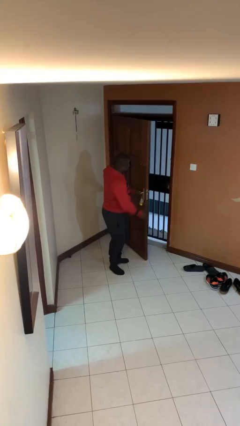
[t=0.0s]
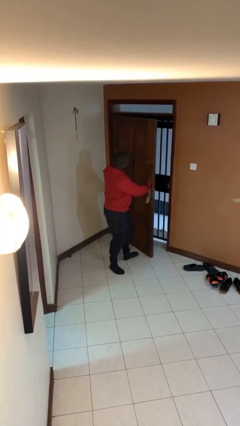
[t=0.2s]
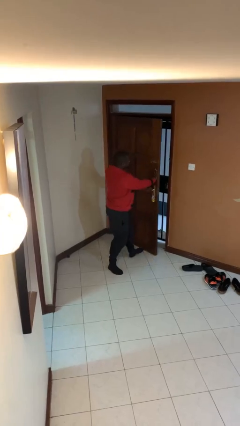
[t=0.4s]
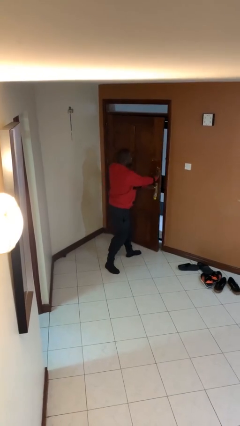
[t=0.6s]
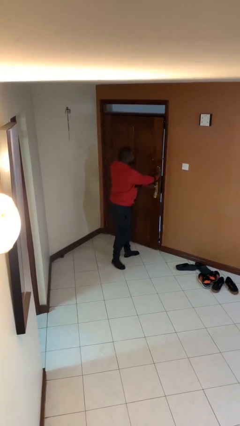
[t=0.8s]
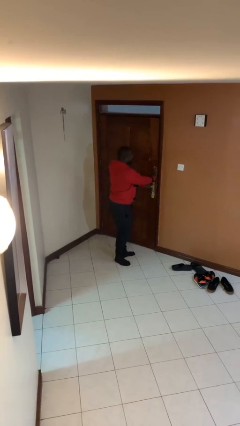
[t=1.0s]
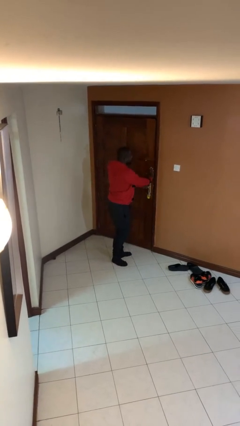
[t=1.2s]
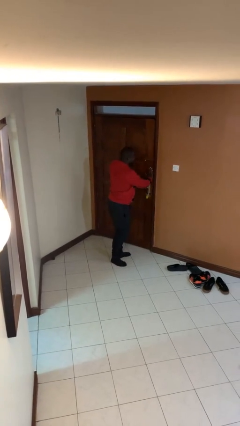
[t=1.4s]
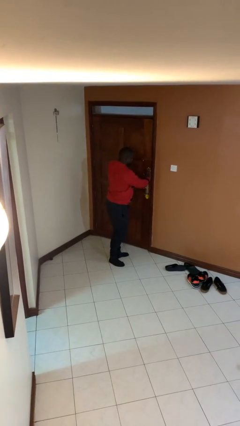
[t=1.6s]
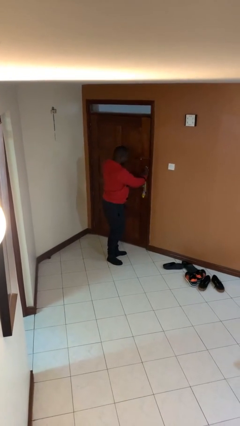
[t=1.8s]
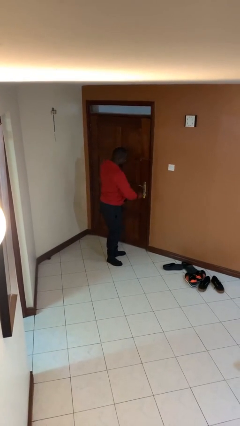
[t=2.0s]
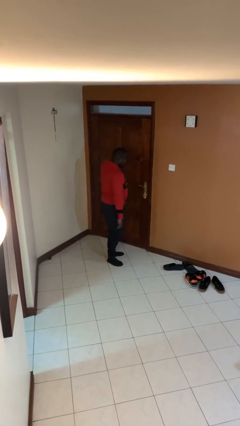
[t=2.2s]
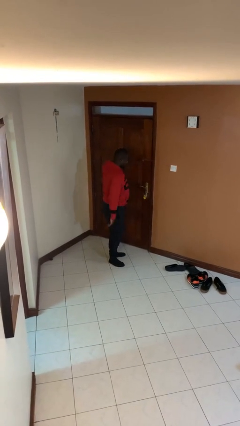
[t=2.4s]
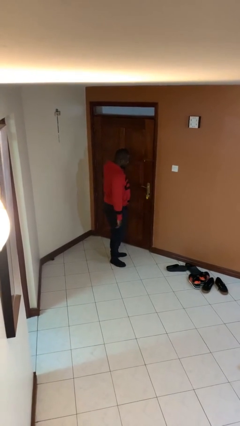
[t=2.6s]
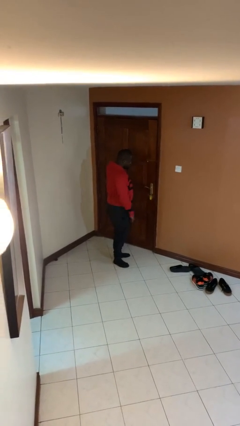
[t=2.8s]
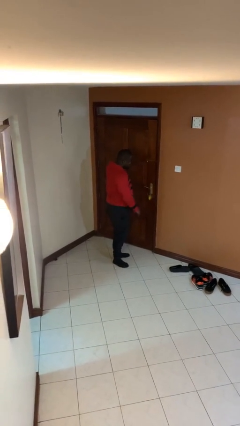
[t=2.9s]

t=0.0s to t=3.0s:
person closes facility door

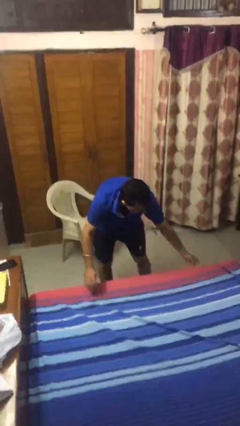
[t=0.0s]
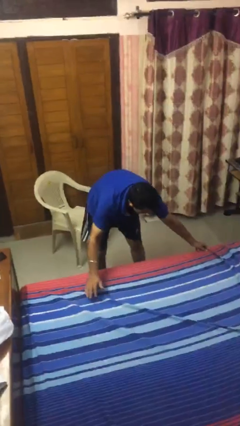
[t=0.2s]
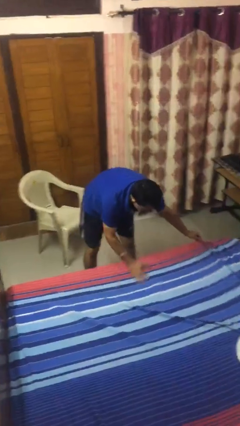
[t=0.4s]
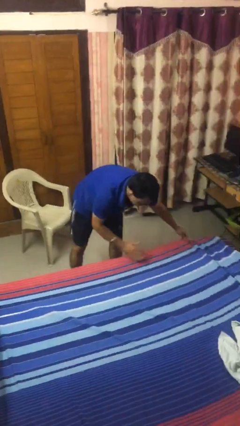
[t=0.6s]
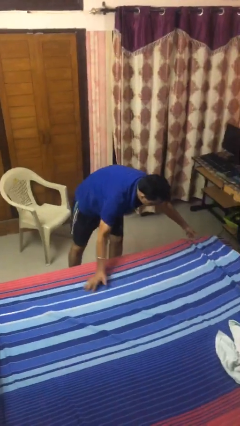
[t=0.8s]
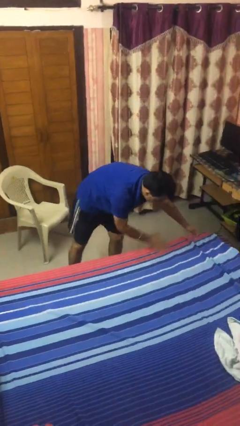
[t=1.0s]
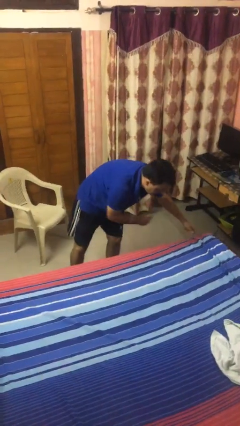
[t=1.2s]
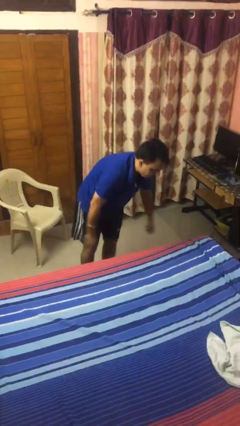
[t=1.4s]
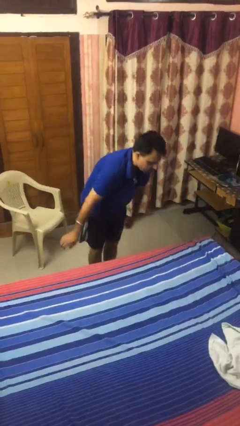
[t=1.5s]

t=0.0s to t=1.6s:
person makes bed

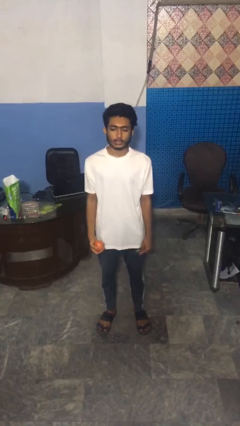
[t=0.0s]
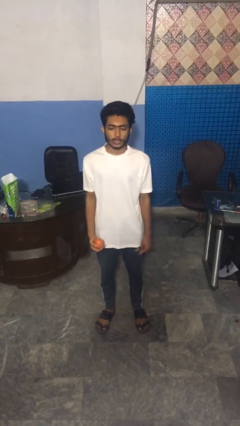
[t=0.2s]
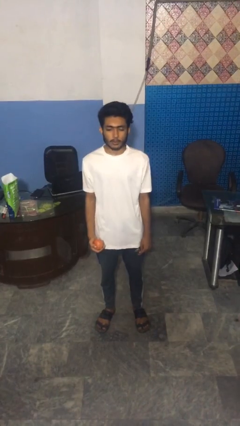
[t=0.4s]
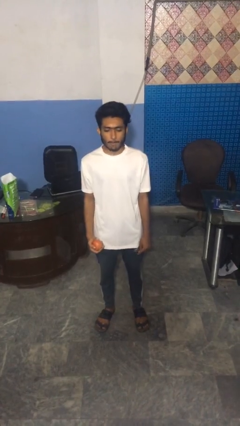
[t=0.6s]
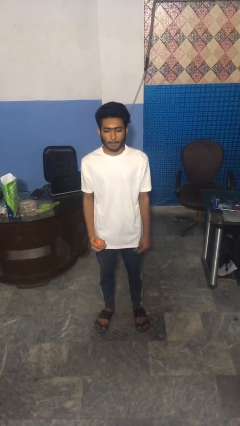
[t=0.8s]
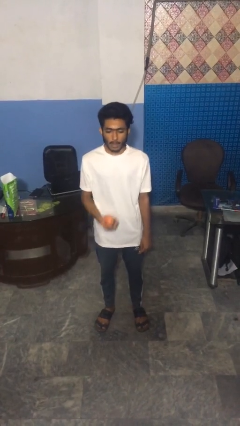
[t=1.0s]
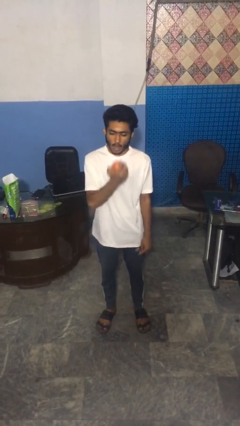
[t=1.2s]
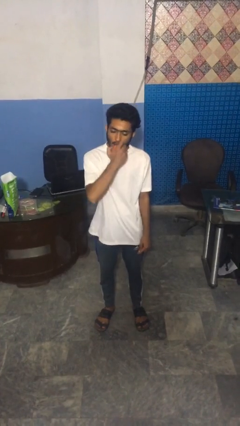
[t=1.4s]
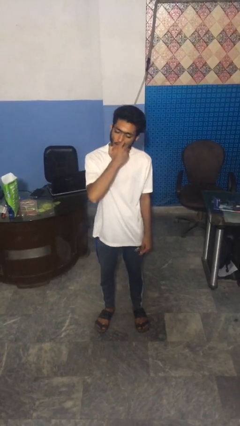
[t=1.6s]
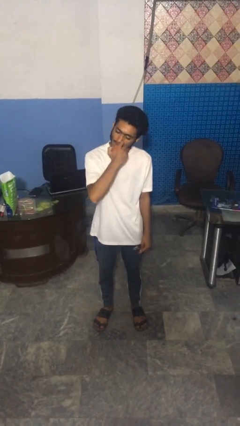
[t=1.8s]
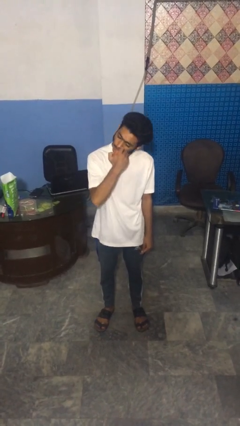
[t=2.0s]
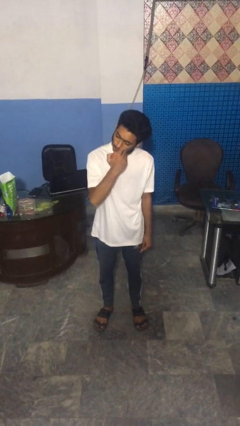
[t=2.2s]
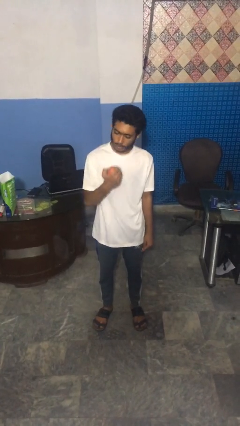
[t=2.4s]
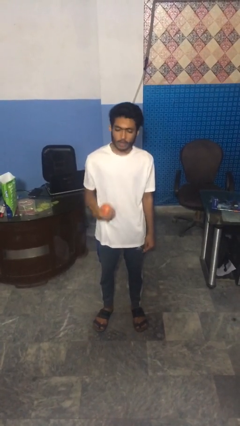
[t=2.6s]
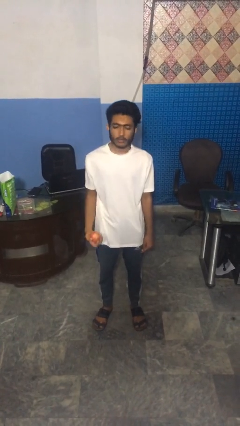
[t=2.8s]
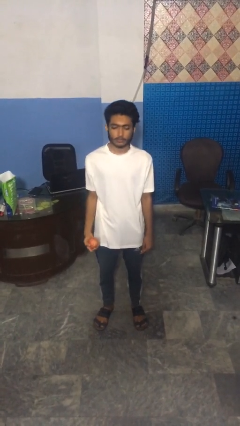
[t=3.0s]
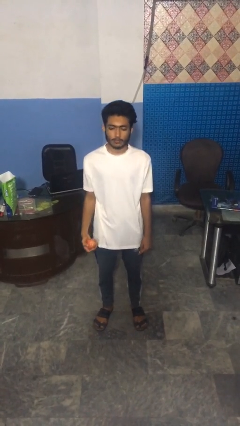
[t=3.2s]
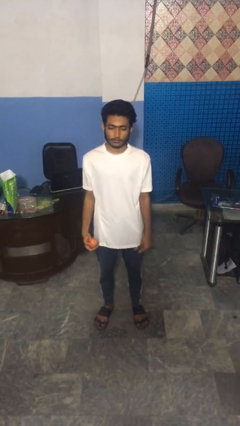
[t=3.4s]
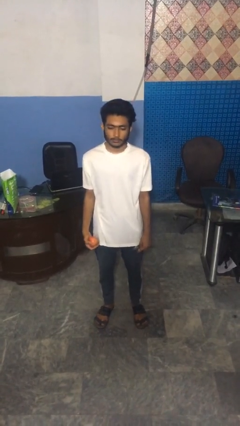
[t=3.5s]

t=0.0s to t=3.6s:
person eats apple

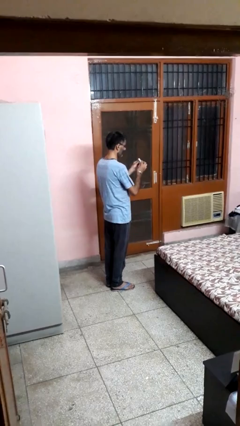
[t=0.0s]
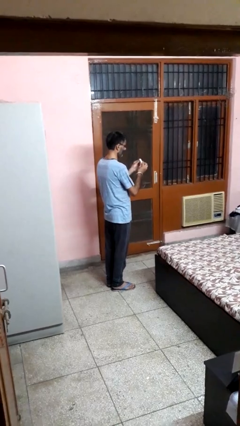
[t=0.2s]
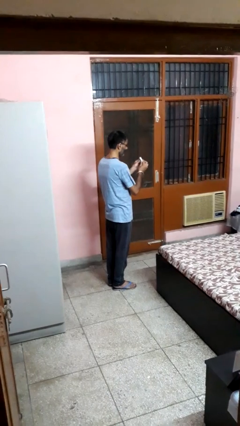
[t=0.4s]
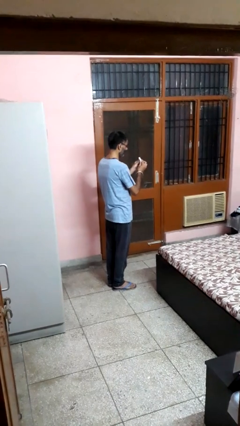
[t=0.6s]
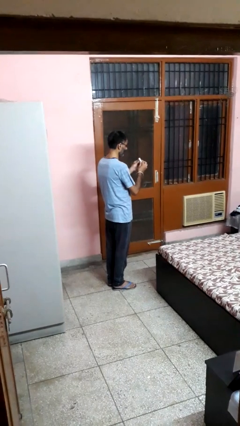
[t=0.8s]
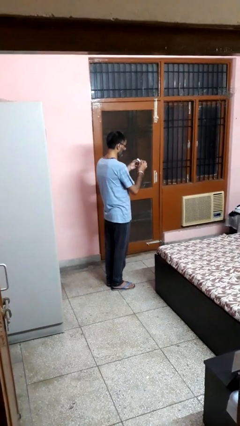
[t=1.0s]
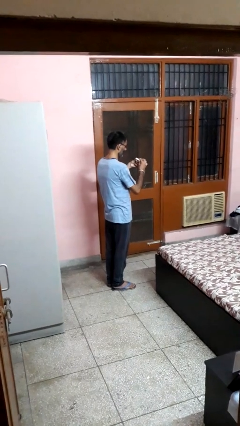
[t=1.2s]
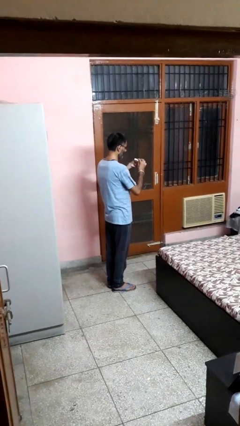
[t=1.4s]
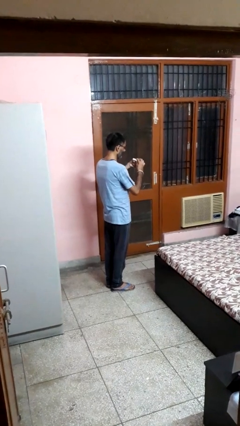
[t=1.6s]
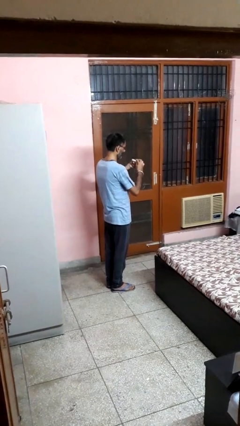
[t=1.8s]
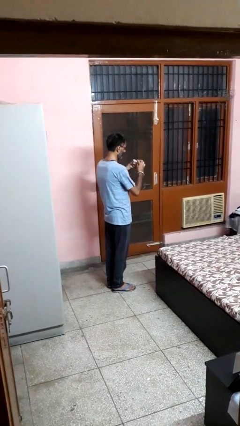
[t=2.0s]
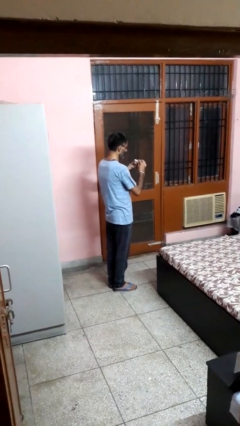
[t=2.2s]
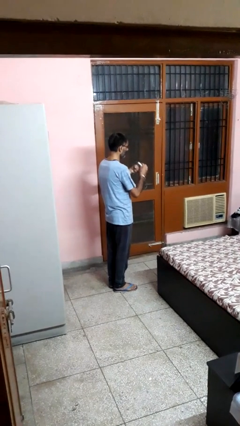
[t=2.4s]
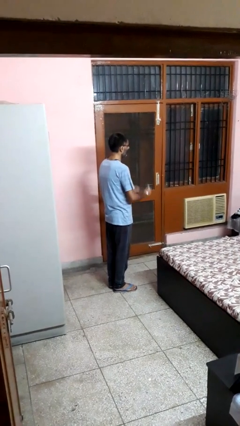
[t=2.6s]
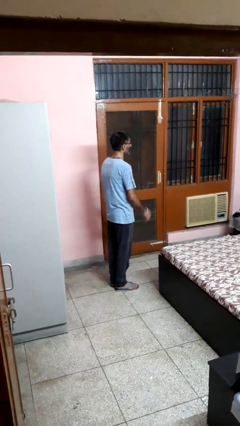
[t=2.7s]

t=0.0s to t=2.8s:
person files fingernails

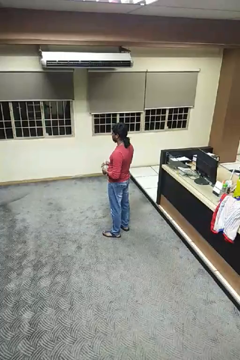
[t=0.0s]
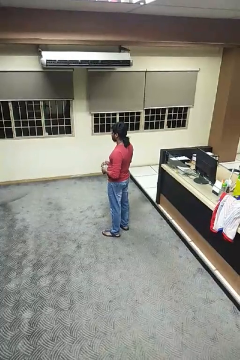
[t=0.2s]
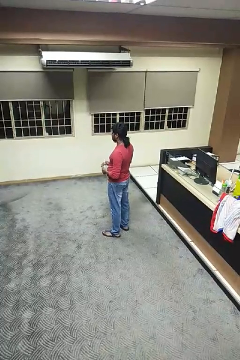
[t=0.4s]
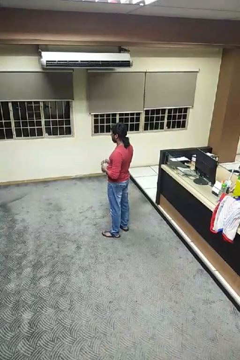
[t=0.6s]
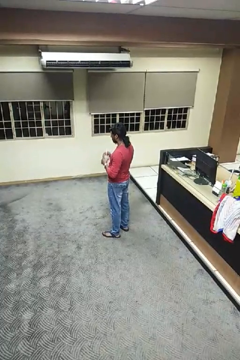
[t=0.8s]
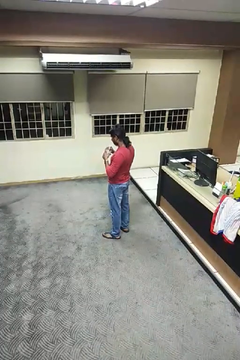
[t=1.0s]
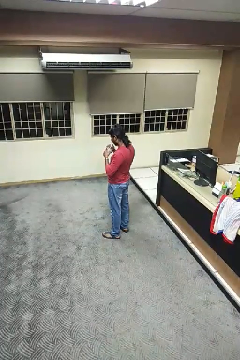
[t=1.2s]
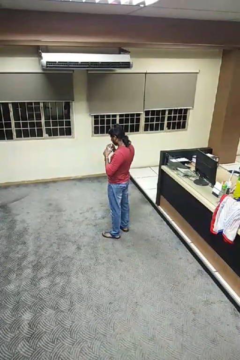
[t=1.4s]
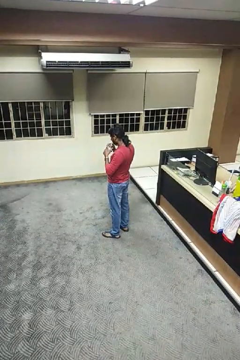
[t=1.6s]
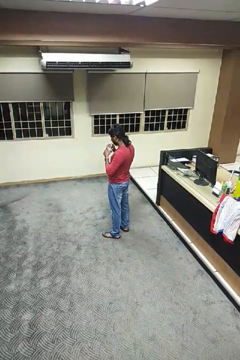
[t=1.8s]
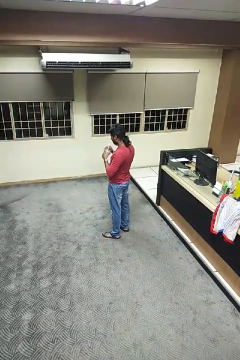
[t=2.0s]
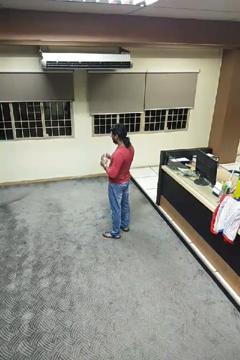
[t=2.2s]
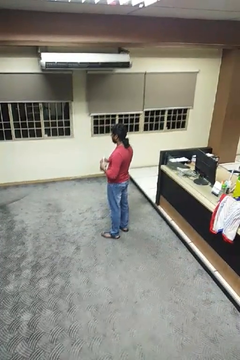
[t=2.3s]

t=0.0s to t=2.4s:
person drinks from straw

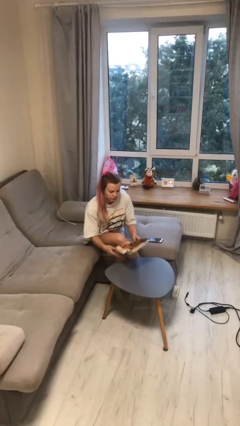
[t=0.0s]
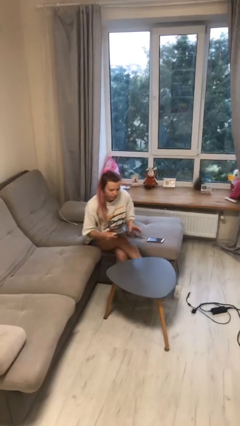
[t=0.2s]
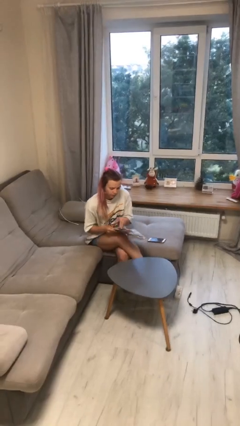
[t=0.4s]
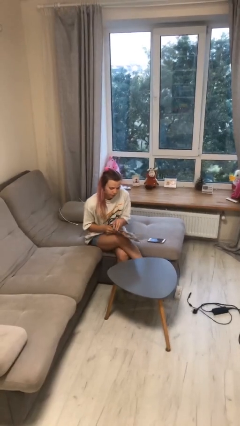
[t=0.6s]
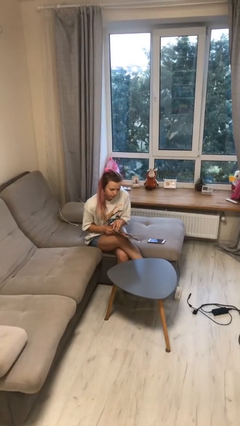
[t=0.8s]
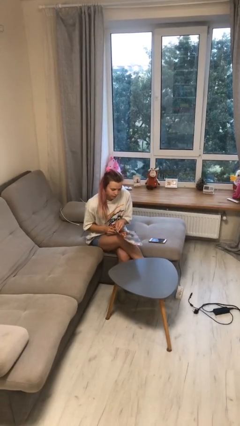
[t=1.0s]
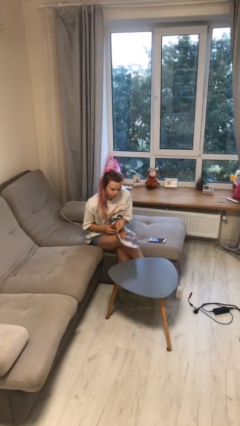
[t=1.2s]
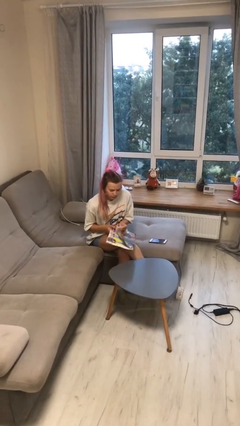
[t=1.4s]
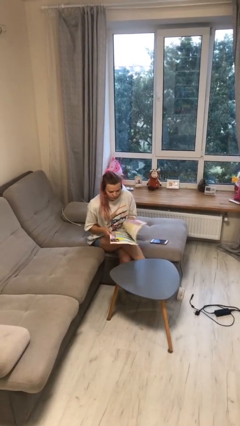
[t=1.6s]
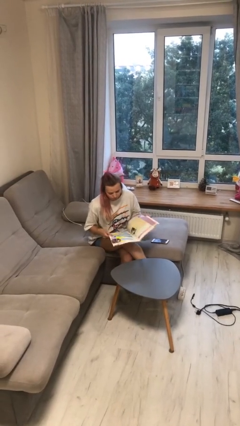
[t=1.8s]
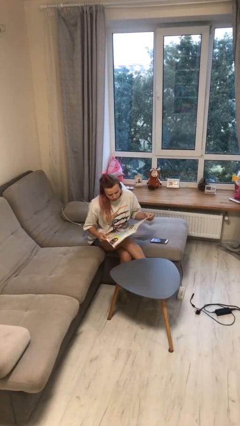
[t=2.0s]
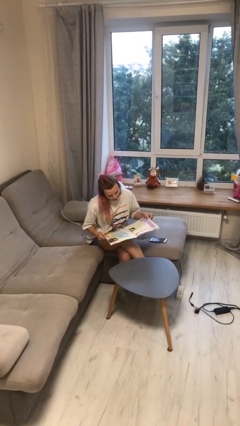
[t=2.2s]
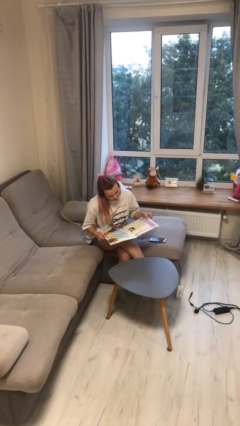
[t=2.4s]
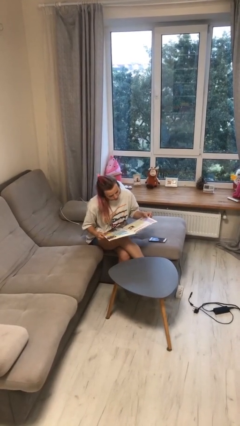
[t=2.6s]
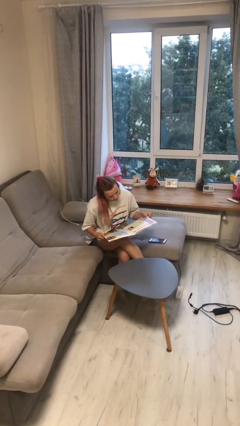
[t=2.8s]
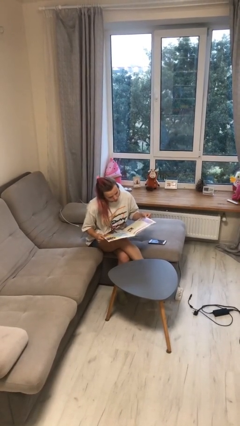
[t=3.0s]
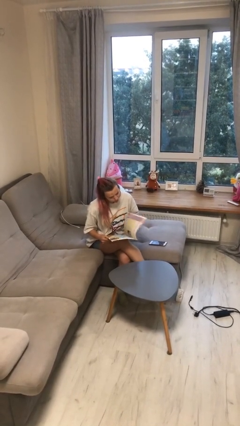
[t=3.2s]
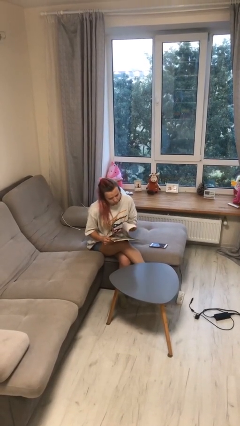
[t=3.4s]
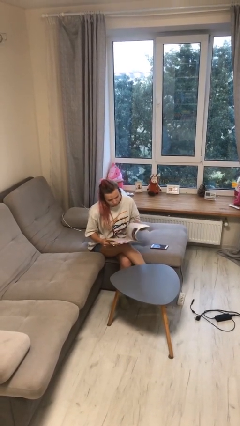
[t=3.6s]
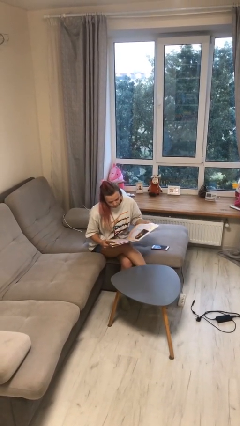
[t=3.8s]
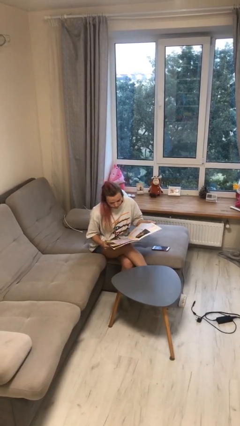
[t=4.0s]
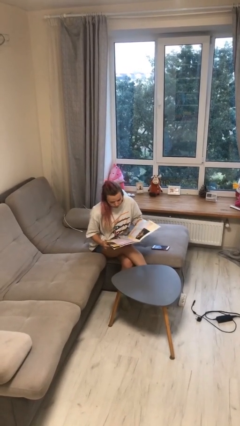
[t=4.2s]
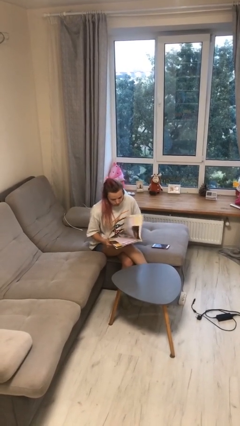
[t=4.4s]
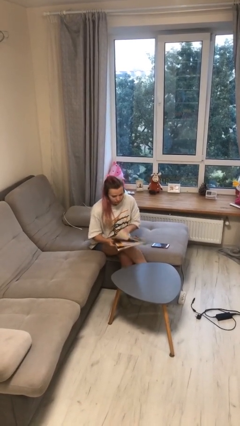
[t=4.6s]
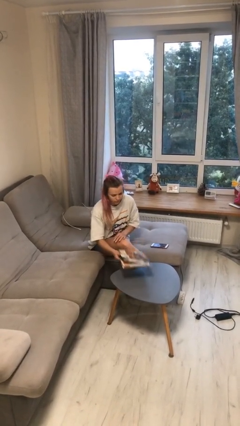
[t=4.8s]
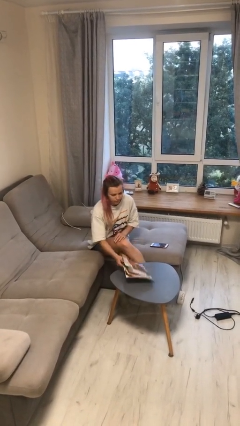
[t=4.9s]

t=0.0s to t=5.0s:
person reads magazine
